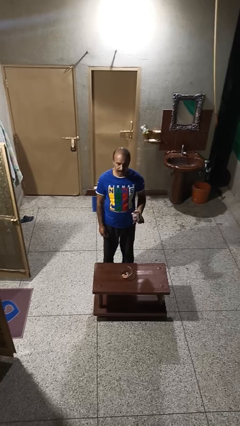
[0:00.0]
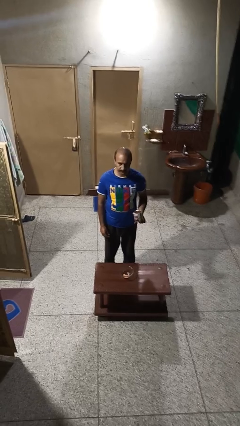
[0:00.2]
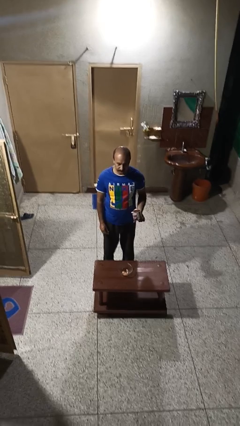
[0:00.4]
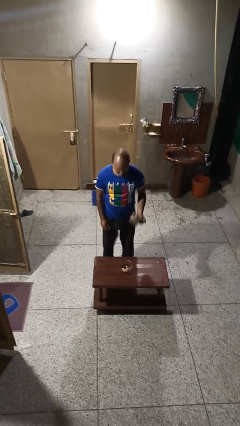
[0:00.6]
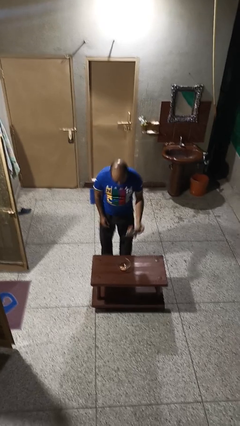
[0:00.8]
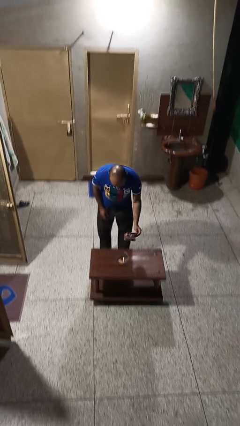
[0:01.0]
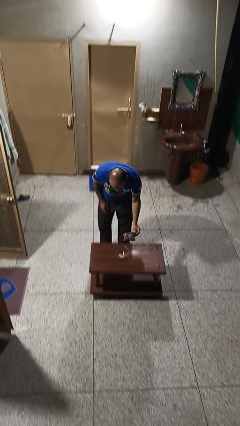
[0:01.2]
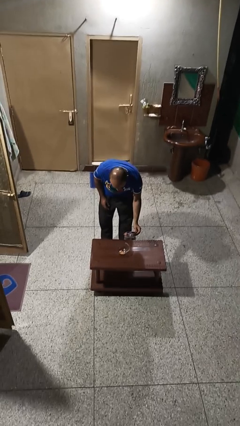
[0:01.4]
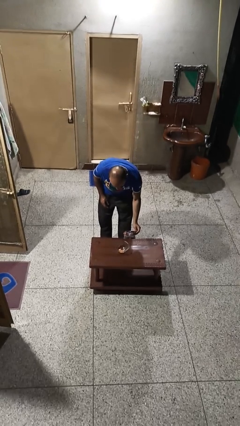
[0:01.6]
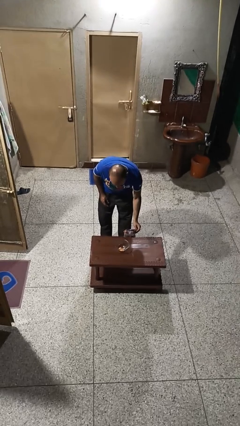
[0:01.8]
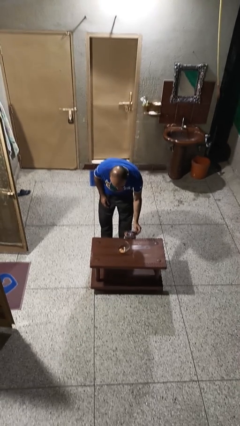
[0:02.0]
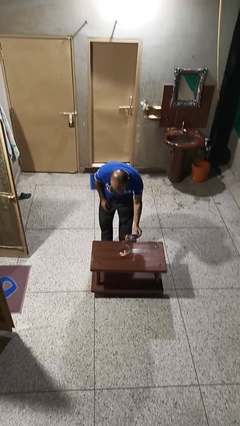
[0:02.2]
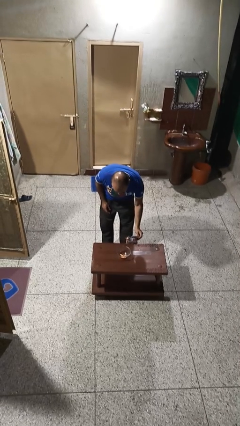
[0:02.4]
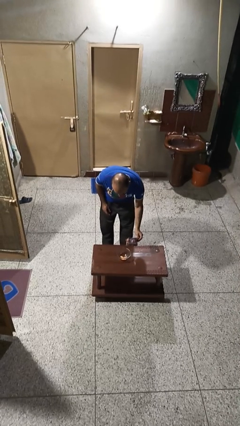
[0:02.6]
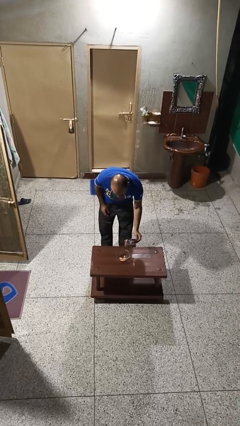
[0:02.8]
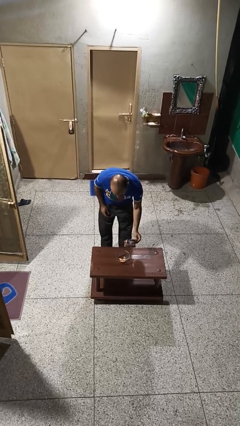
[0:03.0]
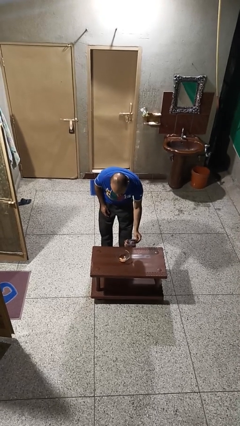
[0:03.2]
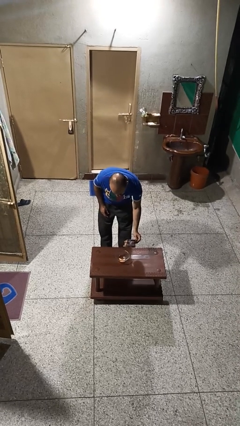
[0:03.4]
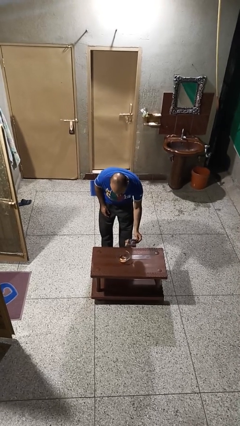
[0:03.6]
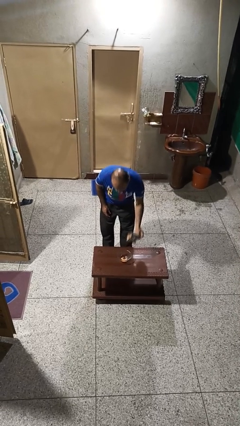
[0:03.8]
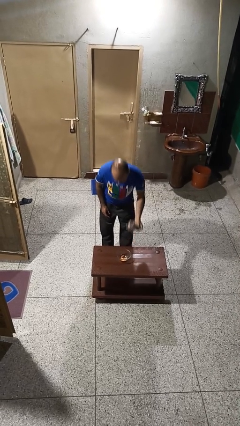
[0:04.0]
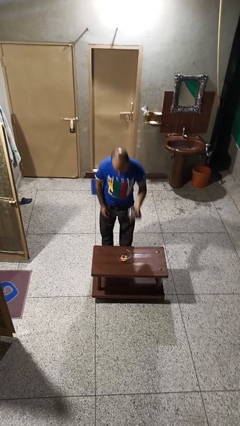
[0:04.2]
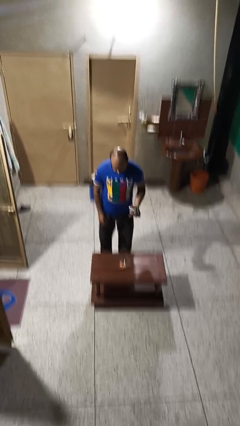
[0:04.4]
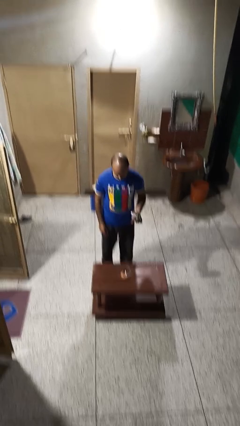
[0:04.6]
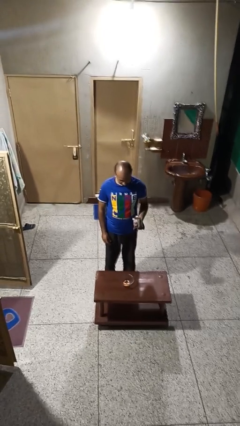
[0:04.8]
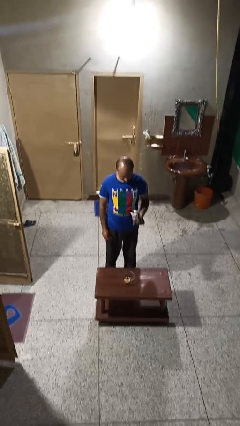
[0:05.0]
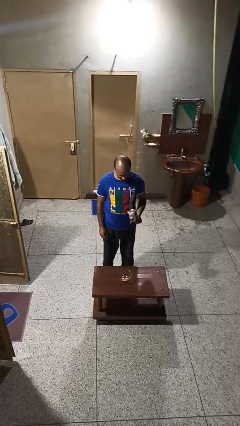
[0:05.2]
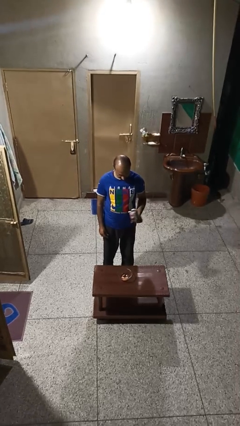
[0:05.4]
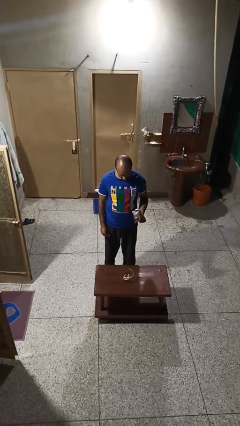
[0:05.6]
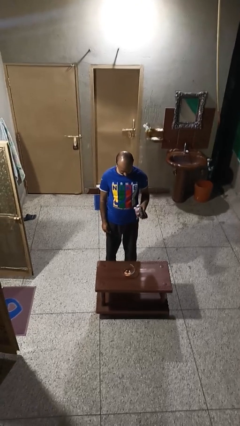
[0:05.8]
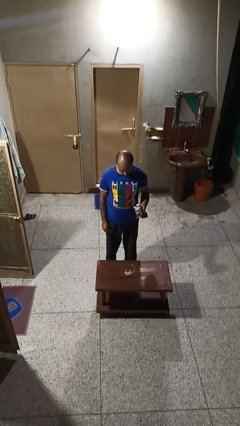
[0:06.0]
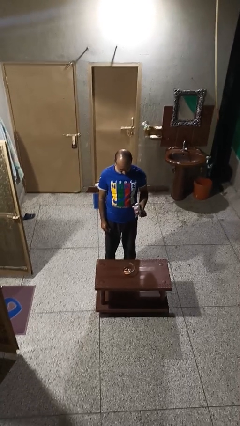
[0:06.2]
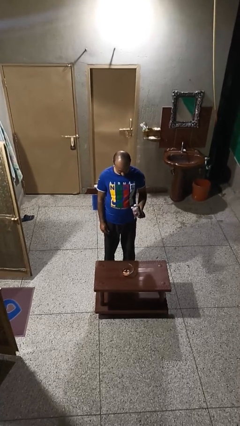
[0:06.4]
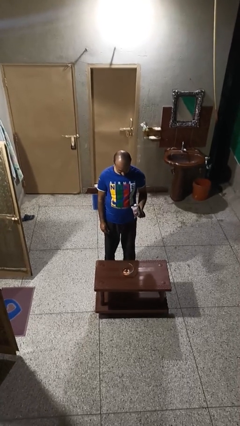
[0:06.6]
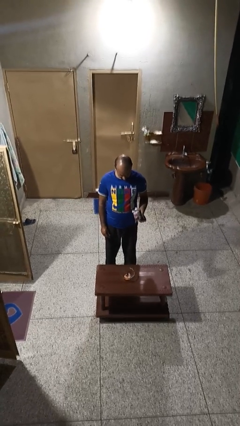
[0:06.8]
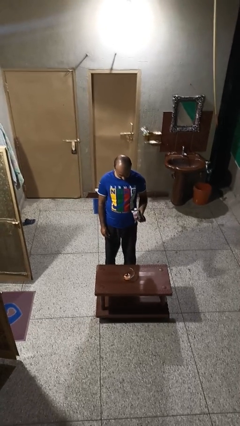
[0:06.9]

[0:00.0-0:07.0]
person pours into bowl

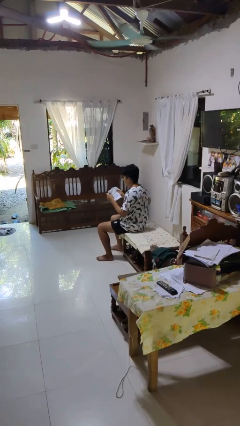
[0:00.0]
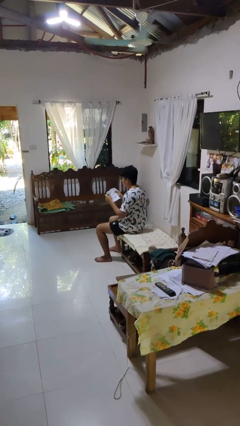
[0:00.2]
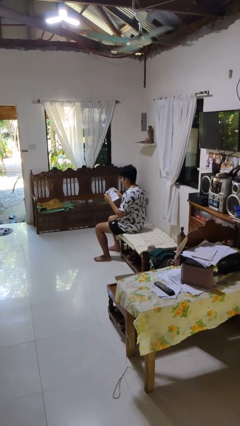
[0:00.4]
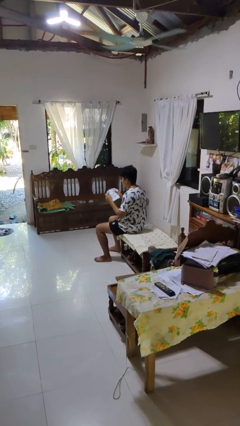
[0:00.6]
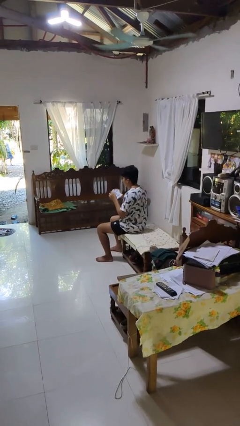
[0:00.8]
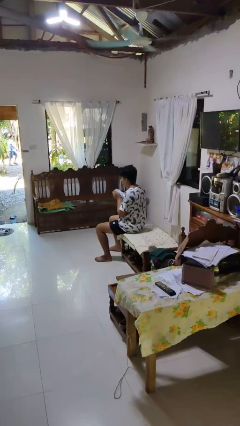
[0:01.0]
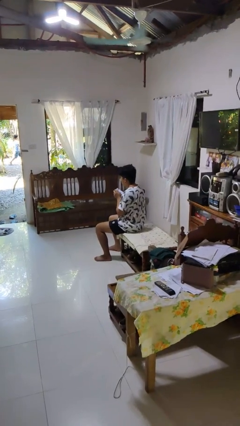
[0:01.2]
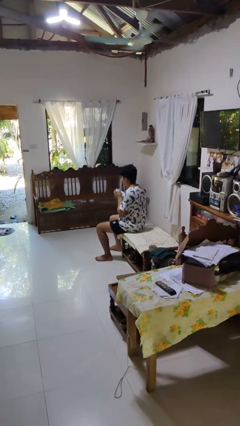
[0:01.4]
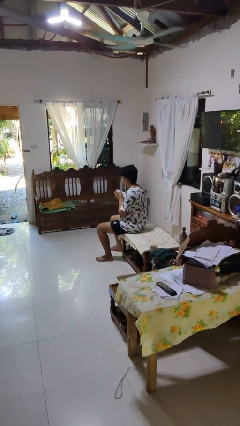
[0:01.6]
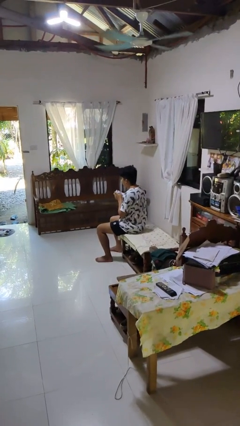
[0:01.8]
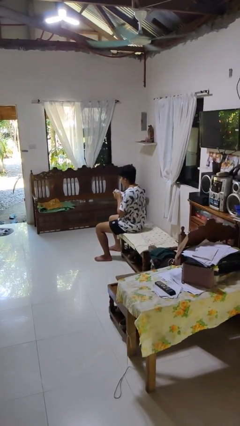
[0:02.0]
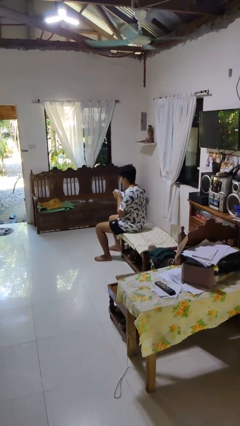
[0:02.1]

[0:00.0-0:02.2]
person crumples paper

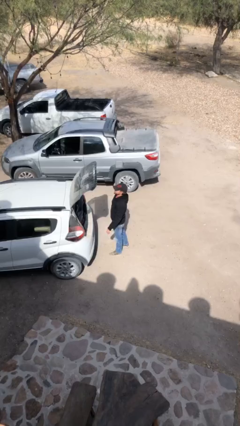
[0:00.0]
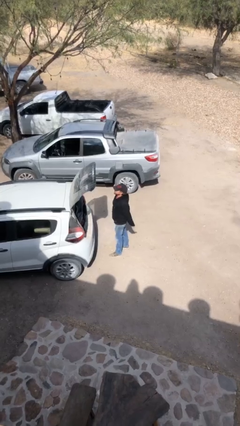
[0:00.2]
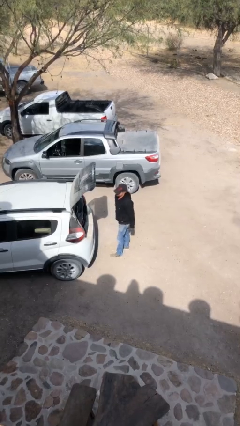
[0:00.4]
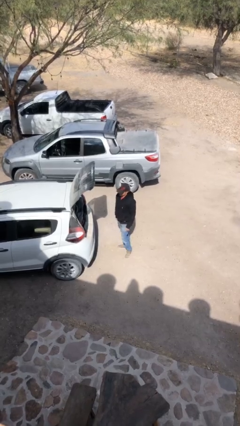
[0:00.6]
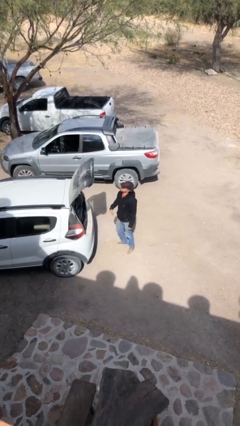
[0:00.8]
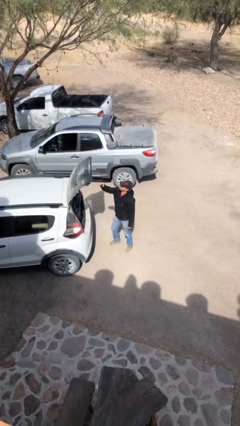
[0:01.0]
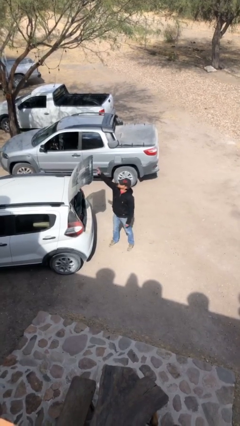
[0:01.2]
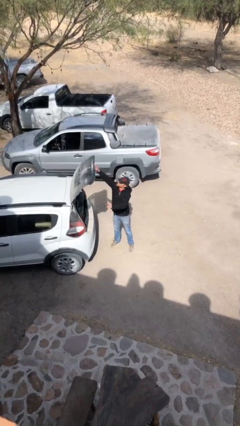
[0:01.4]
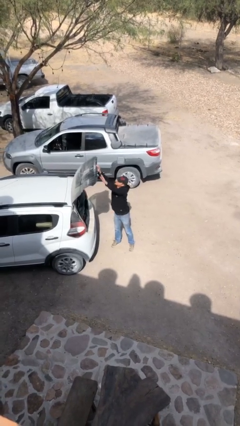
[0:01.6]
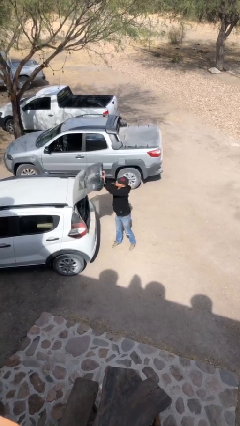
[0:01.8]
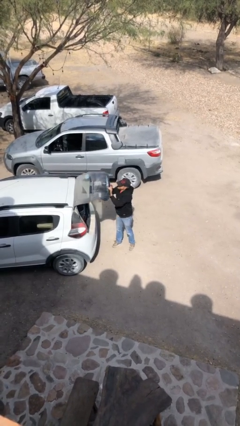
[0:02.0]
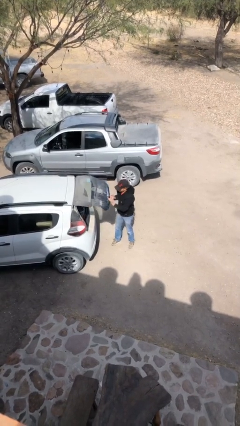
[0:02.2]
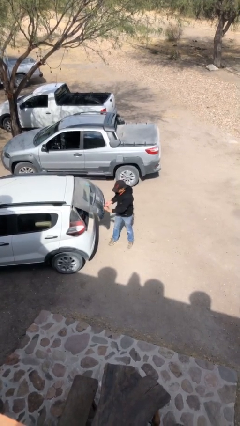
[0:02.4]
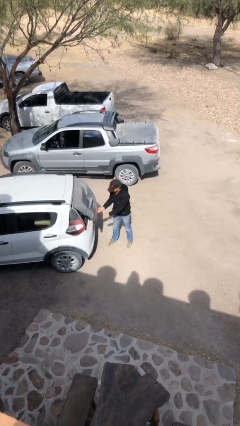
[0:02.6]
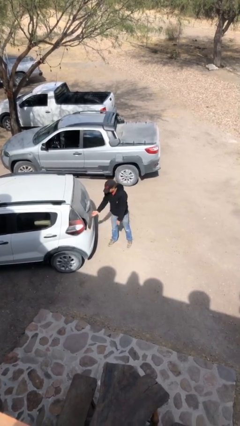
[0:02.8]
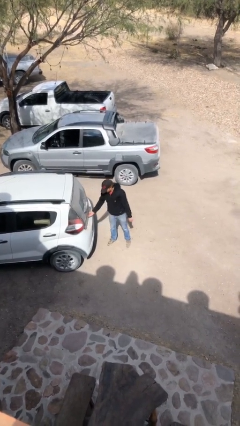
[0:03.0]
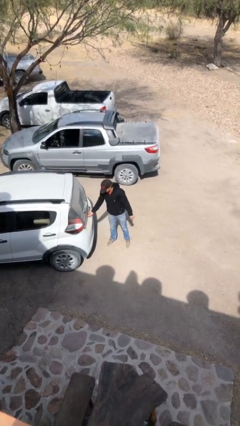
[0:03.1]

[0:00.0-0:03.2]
person closes car trunk

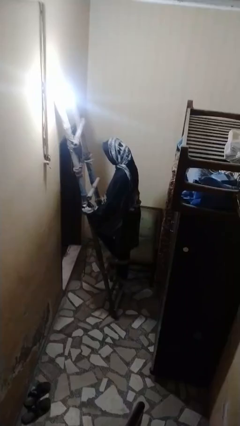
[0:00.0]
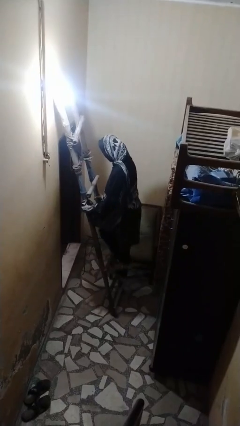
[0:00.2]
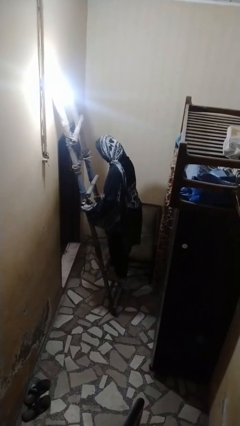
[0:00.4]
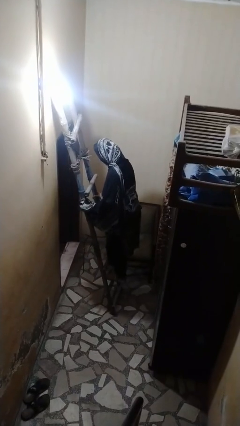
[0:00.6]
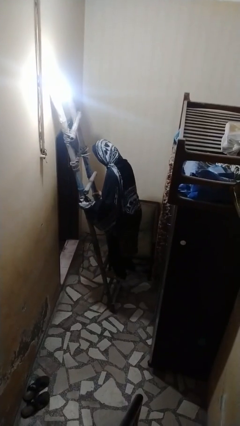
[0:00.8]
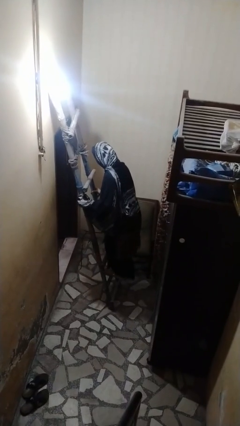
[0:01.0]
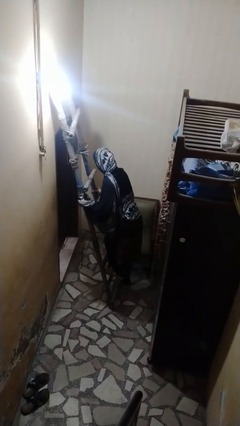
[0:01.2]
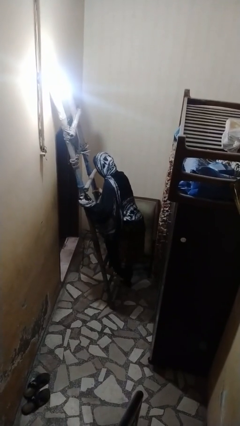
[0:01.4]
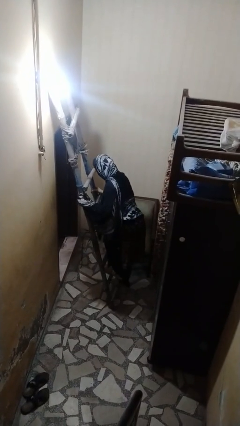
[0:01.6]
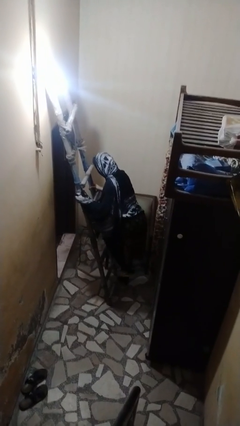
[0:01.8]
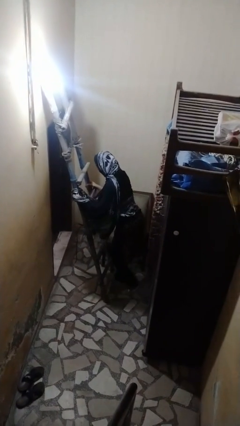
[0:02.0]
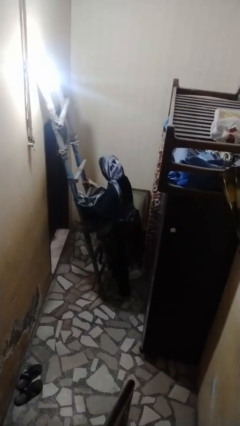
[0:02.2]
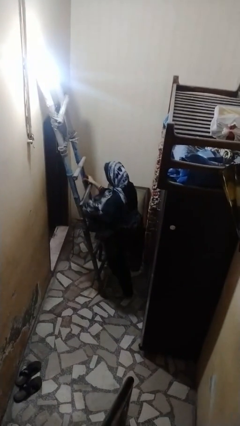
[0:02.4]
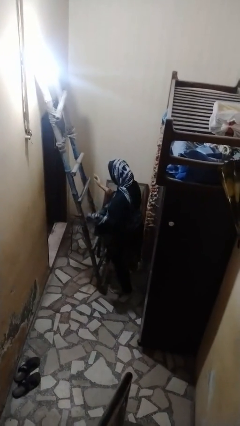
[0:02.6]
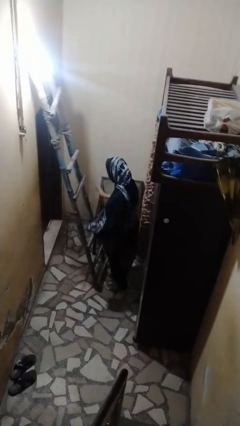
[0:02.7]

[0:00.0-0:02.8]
person climbs down ladder

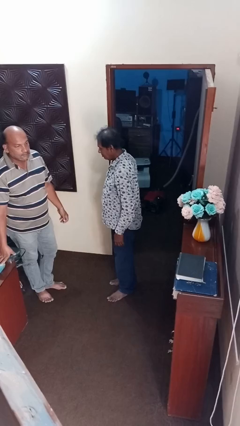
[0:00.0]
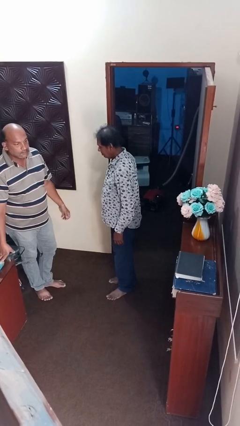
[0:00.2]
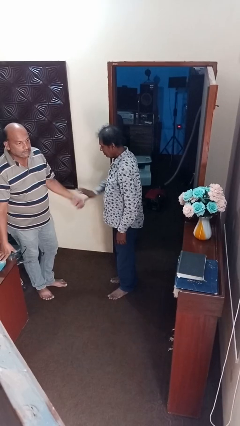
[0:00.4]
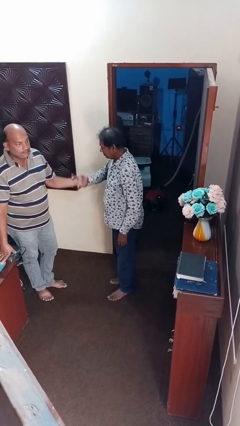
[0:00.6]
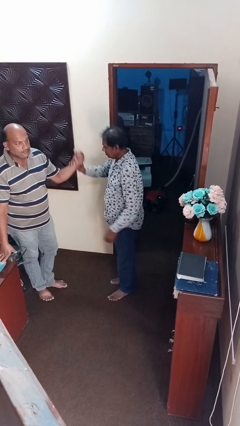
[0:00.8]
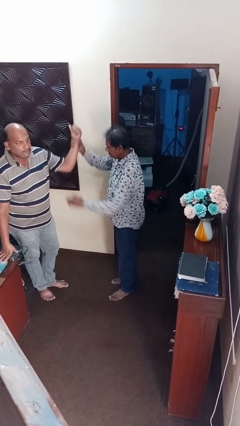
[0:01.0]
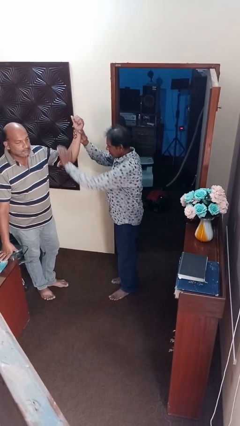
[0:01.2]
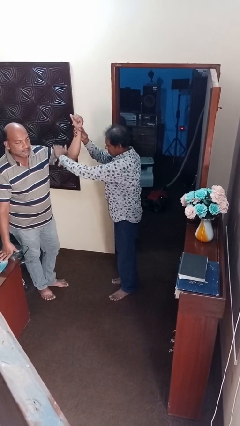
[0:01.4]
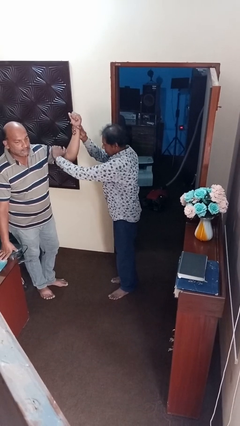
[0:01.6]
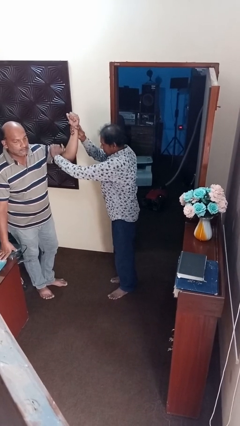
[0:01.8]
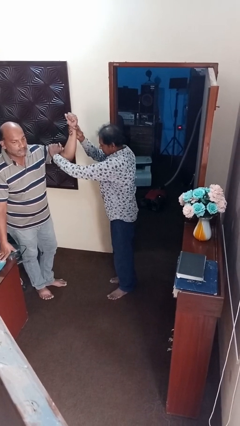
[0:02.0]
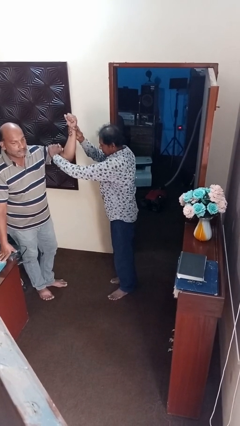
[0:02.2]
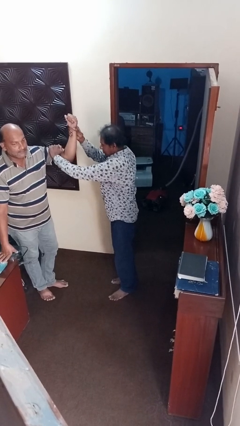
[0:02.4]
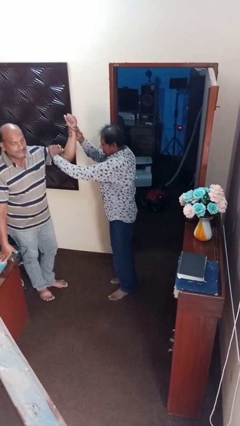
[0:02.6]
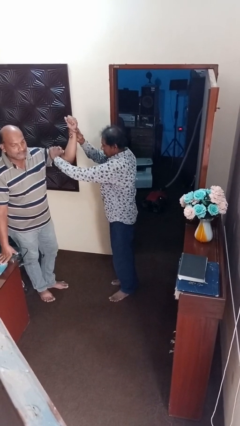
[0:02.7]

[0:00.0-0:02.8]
person grabs person by bicep
